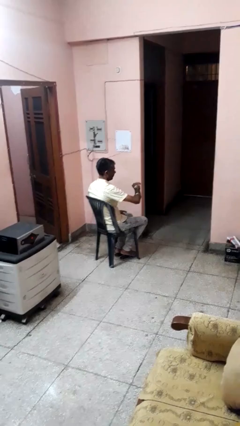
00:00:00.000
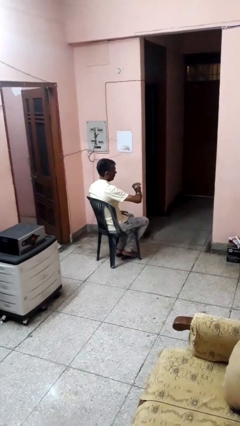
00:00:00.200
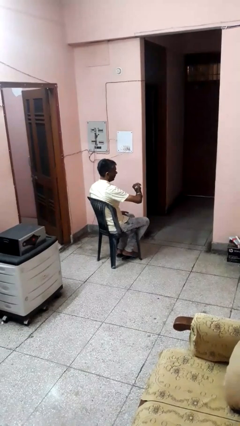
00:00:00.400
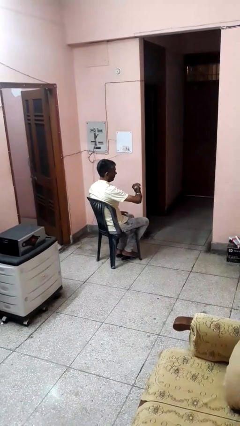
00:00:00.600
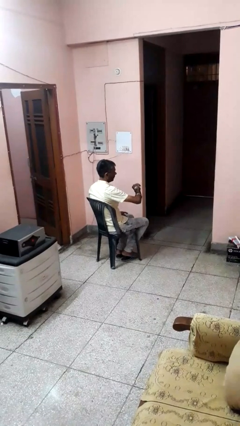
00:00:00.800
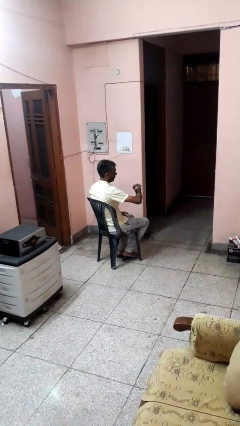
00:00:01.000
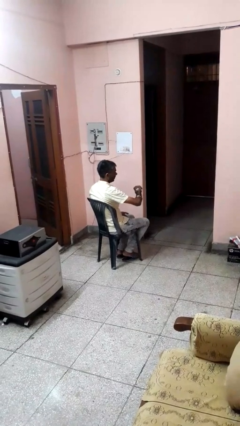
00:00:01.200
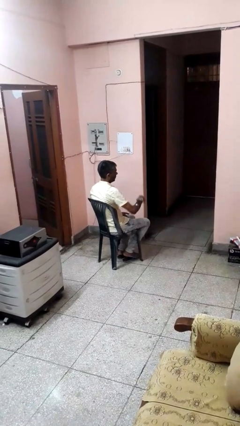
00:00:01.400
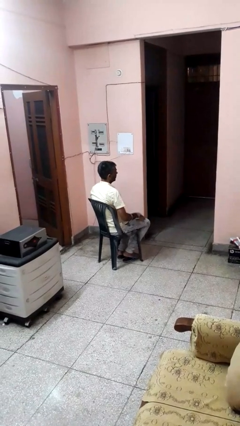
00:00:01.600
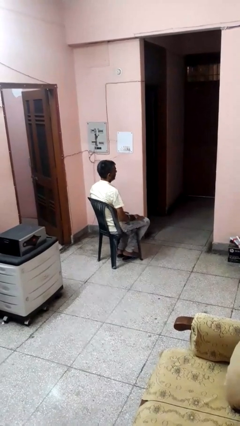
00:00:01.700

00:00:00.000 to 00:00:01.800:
person looks at wristwatch

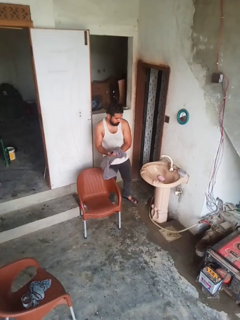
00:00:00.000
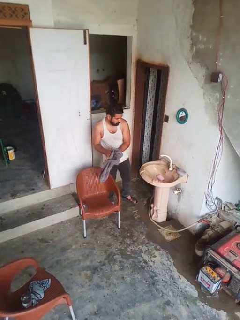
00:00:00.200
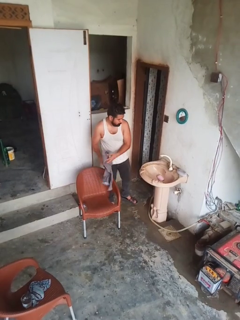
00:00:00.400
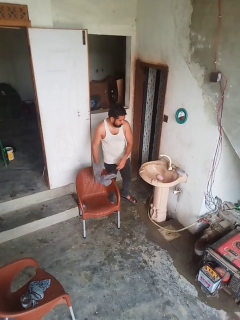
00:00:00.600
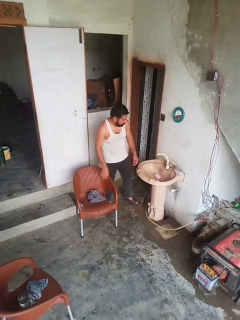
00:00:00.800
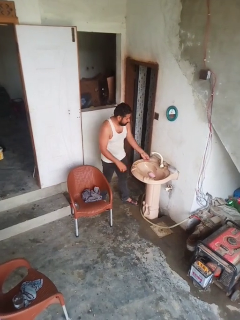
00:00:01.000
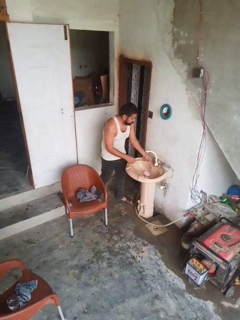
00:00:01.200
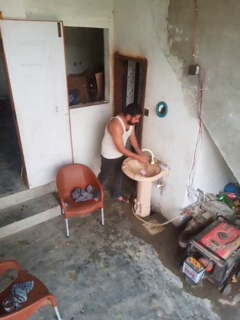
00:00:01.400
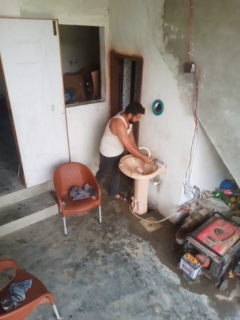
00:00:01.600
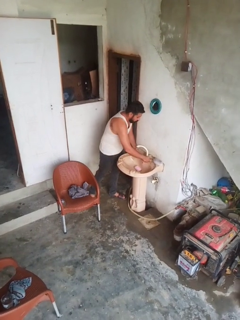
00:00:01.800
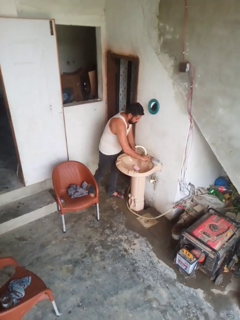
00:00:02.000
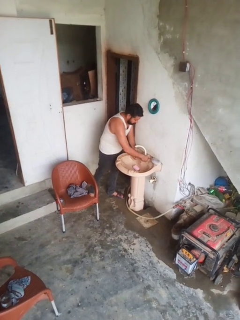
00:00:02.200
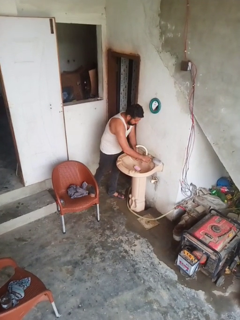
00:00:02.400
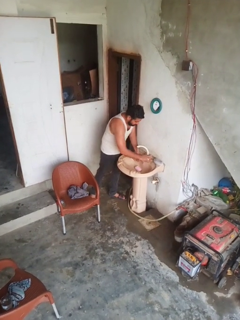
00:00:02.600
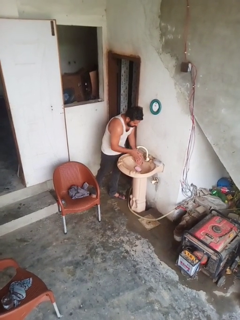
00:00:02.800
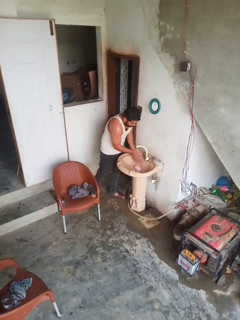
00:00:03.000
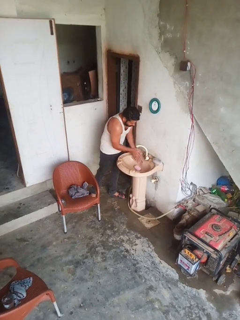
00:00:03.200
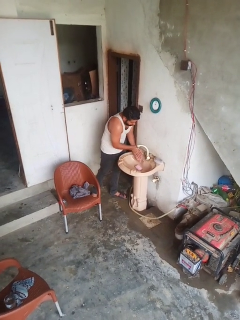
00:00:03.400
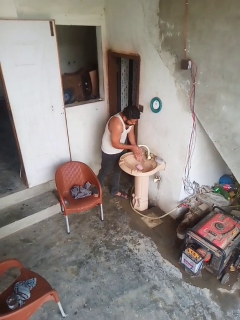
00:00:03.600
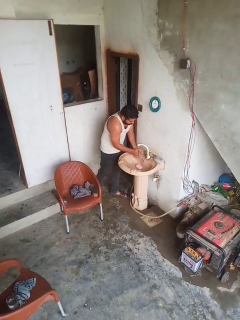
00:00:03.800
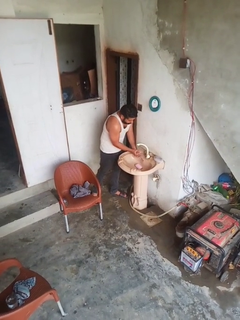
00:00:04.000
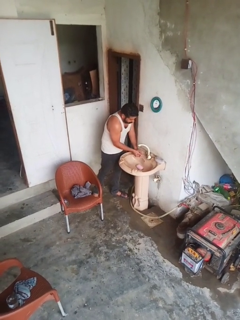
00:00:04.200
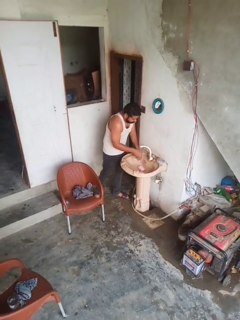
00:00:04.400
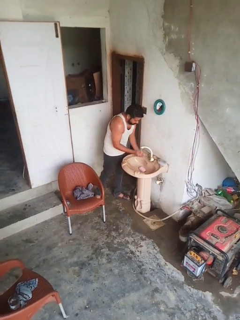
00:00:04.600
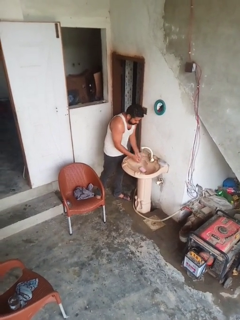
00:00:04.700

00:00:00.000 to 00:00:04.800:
person washes hands

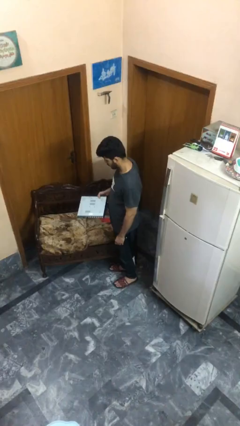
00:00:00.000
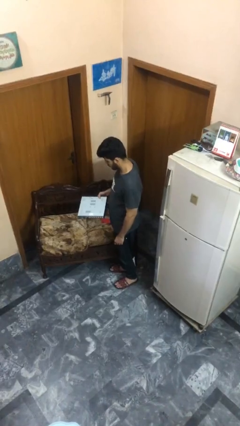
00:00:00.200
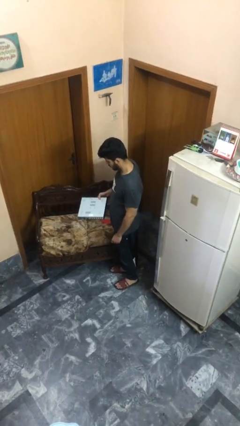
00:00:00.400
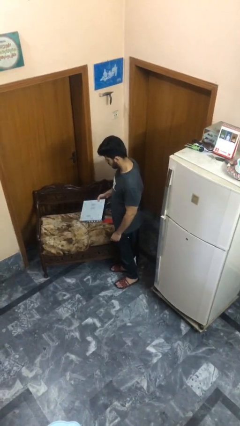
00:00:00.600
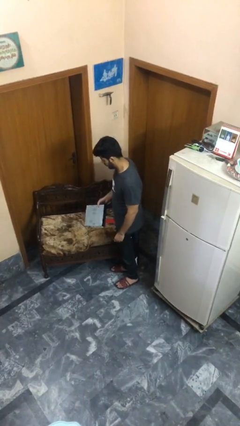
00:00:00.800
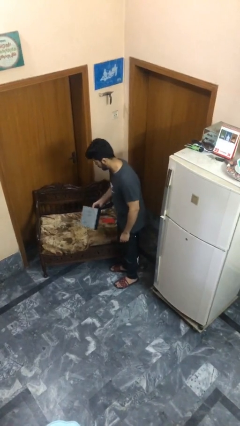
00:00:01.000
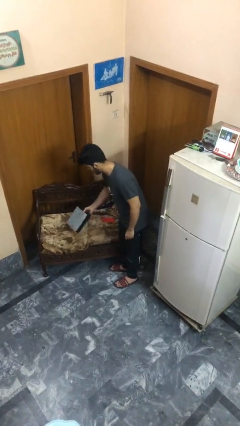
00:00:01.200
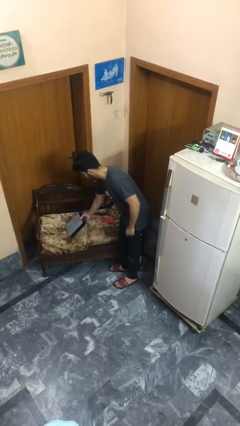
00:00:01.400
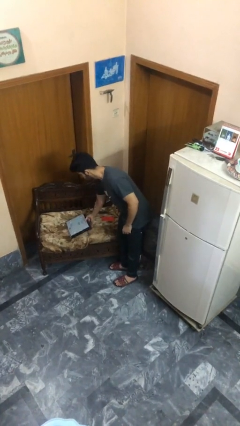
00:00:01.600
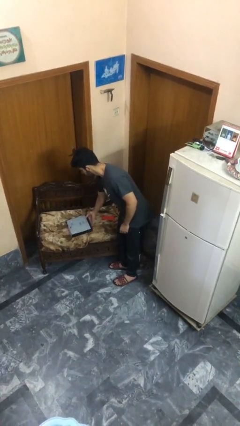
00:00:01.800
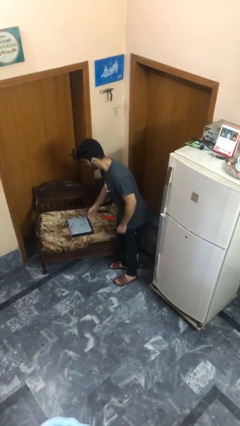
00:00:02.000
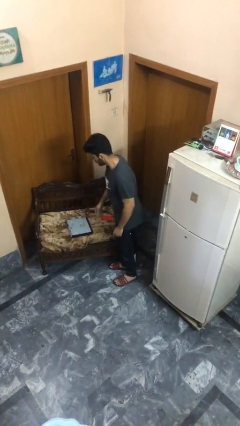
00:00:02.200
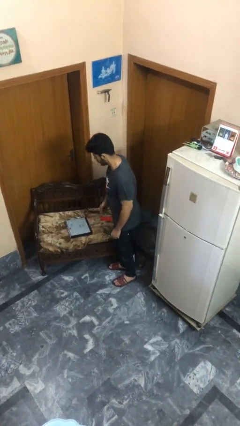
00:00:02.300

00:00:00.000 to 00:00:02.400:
person puts down object on couch

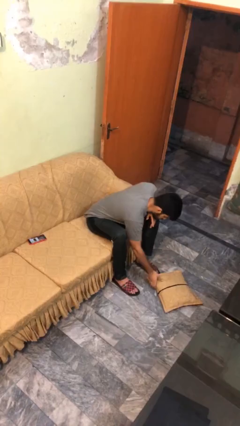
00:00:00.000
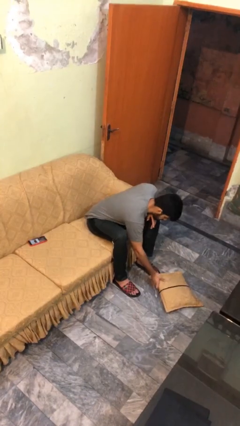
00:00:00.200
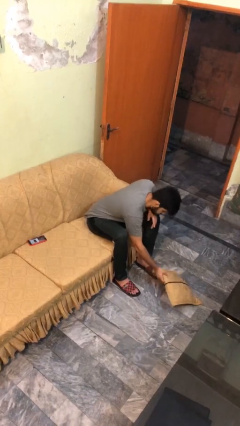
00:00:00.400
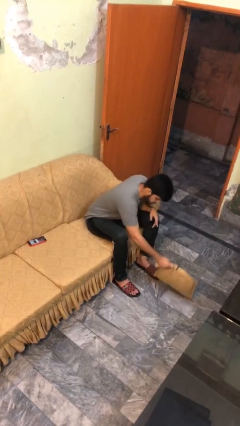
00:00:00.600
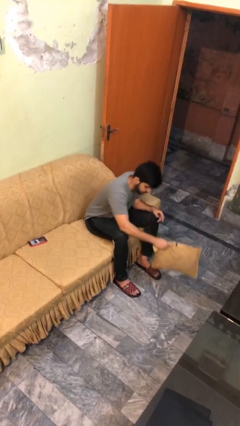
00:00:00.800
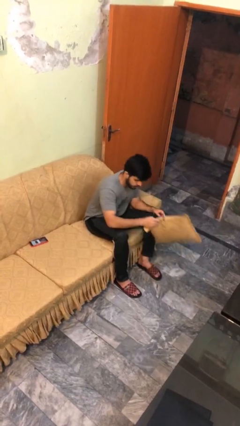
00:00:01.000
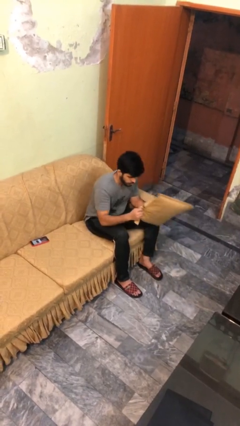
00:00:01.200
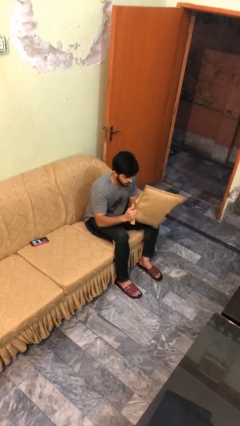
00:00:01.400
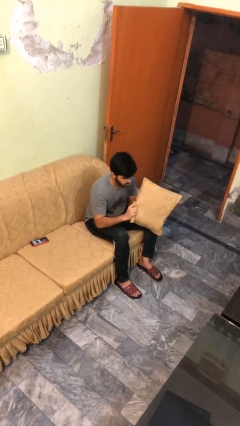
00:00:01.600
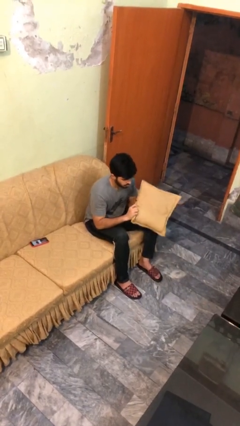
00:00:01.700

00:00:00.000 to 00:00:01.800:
person picks up object from floor

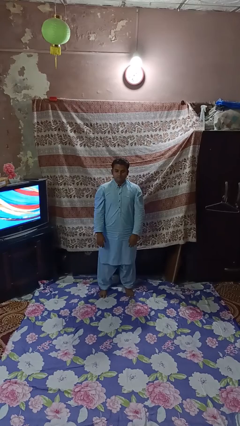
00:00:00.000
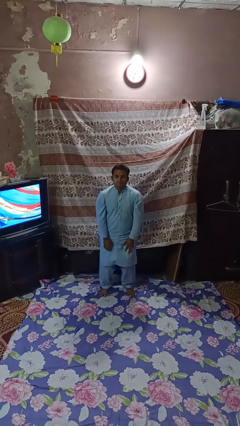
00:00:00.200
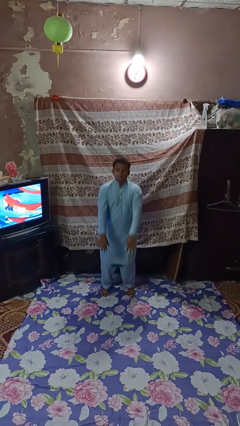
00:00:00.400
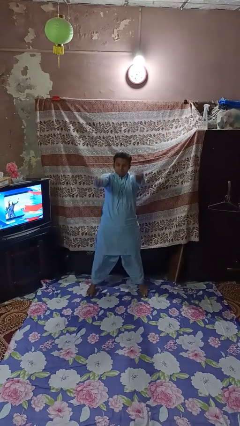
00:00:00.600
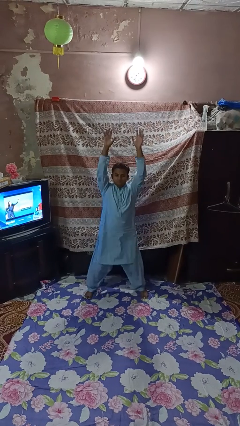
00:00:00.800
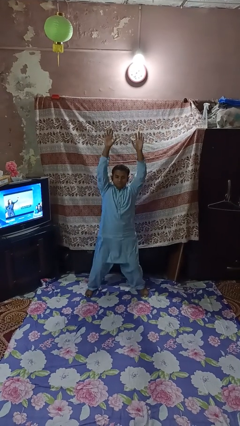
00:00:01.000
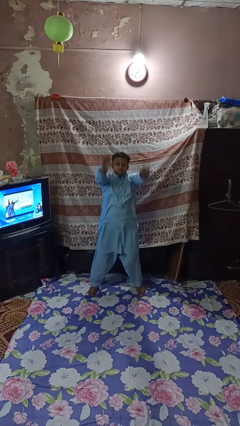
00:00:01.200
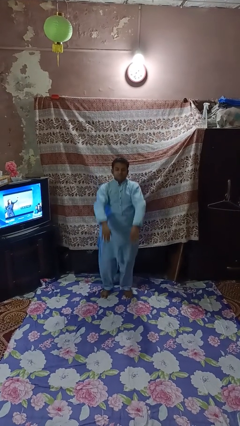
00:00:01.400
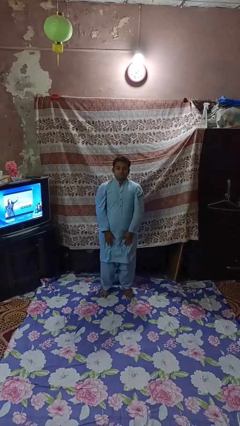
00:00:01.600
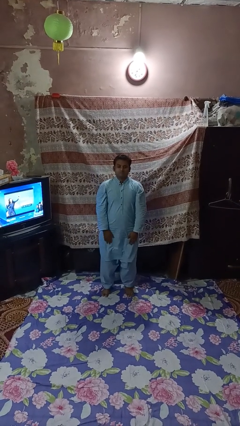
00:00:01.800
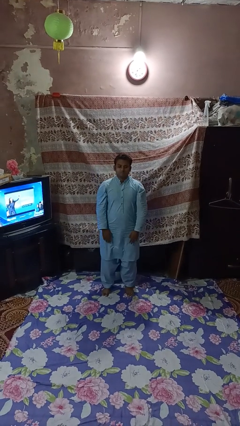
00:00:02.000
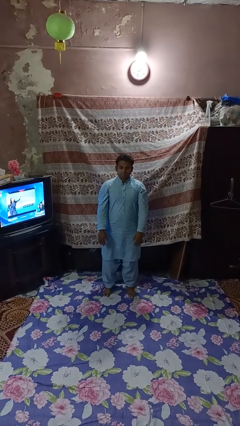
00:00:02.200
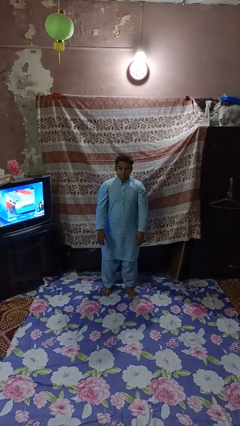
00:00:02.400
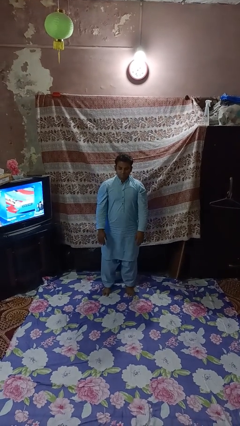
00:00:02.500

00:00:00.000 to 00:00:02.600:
person exercises with jumping jacks

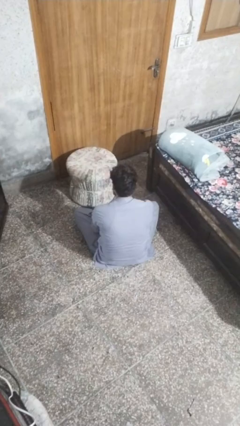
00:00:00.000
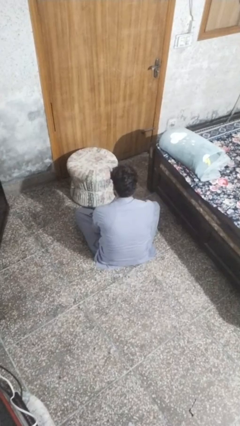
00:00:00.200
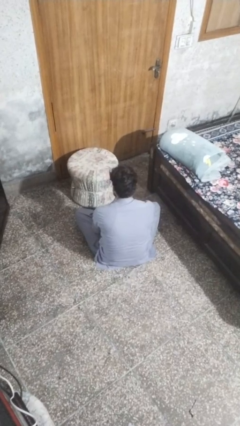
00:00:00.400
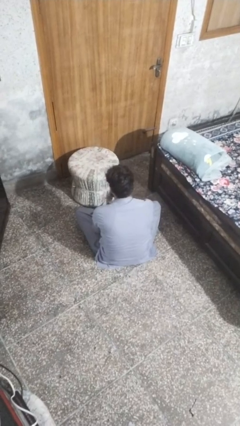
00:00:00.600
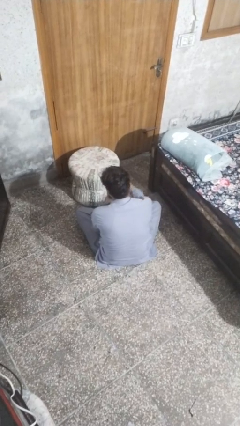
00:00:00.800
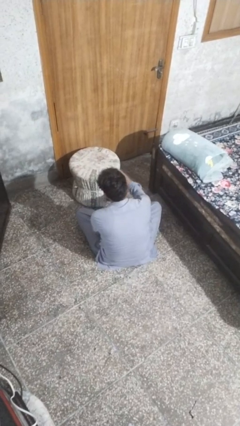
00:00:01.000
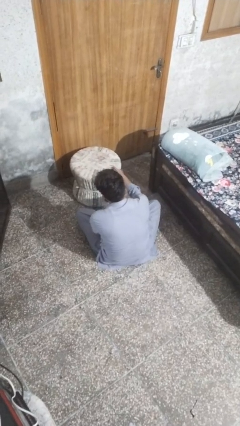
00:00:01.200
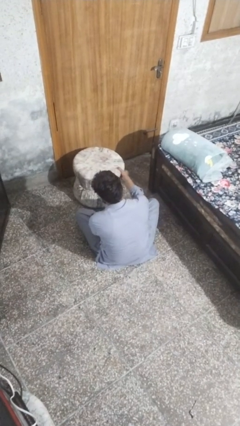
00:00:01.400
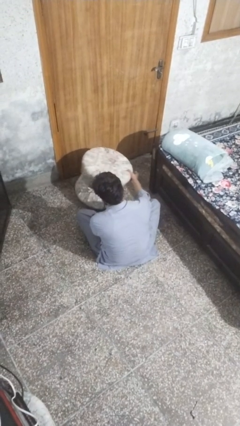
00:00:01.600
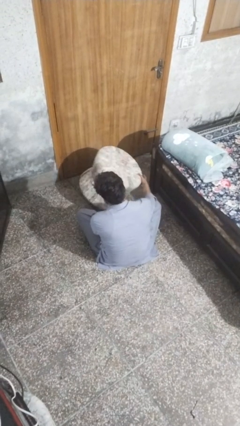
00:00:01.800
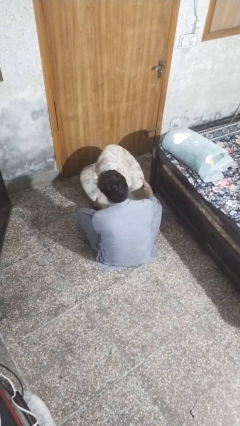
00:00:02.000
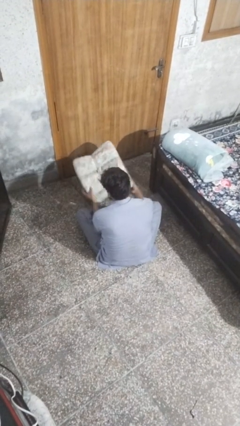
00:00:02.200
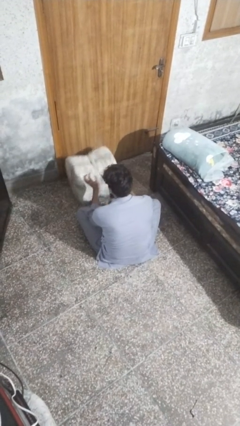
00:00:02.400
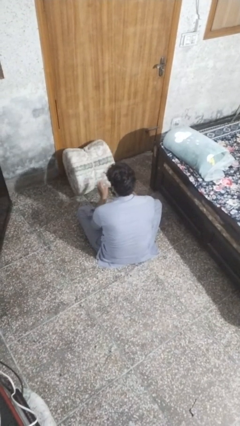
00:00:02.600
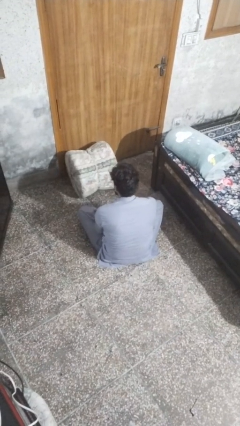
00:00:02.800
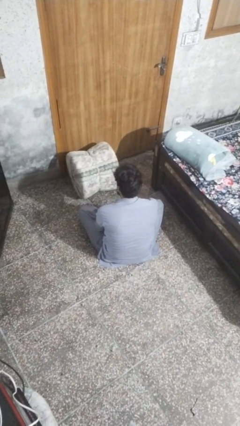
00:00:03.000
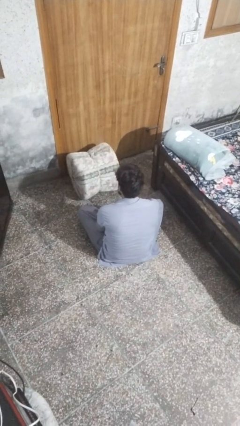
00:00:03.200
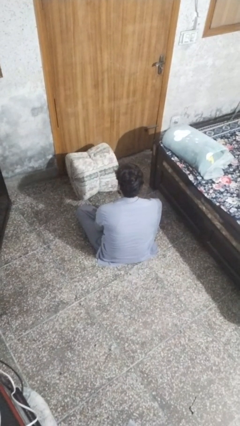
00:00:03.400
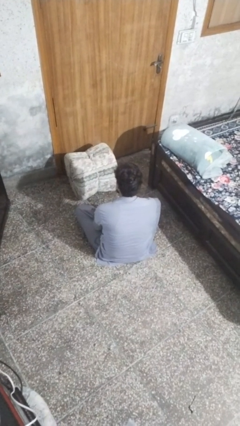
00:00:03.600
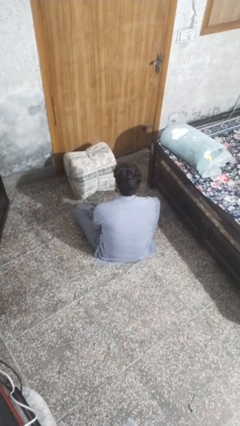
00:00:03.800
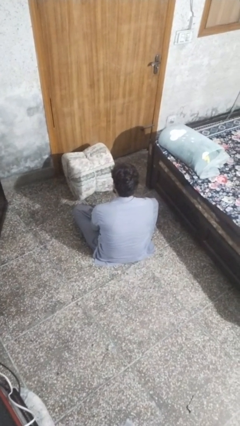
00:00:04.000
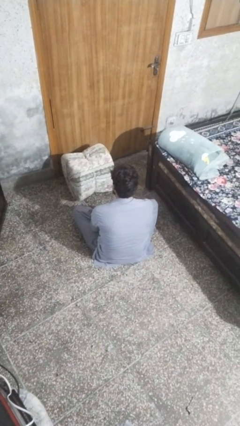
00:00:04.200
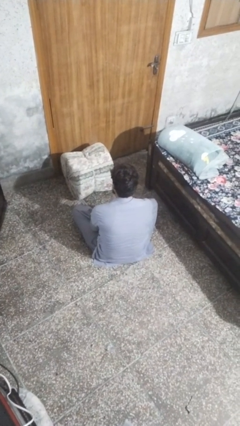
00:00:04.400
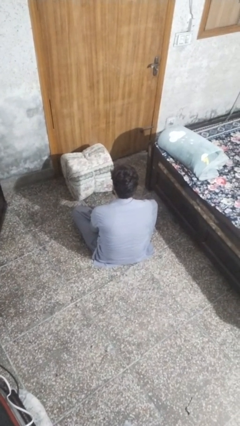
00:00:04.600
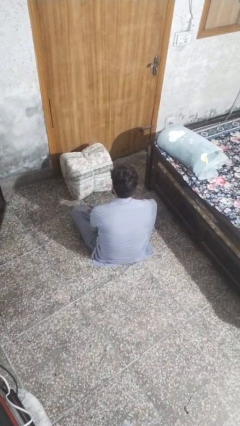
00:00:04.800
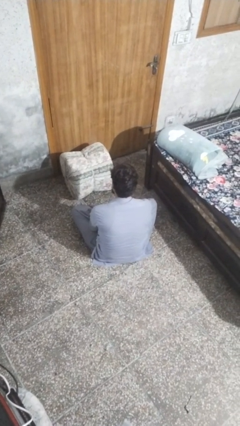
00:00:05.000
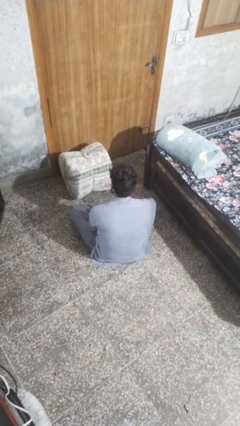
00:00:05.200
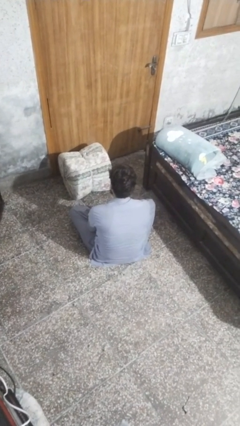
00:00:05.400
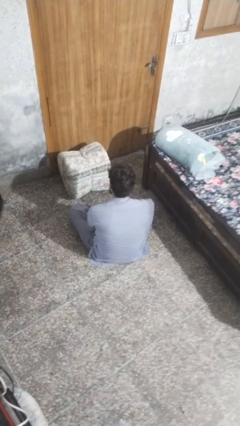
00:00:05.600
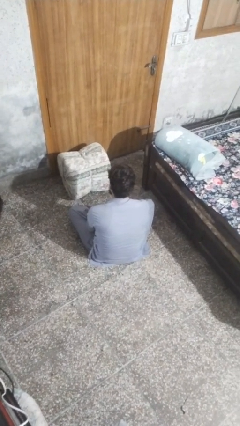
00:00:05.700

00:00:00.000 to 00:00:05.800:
person knocks over furniture
